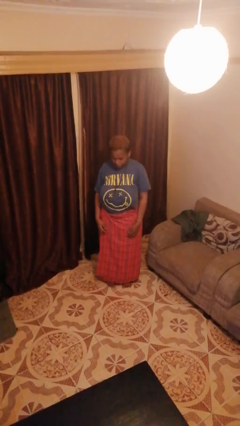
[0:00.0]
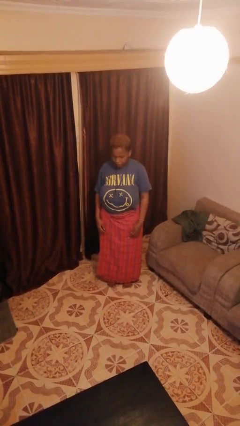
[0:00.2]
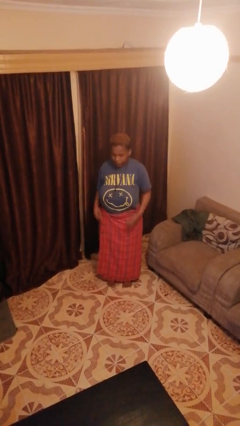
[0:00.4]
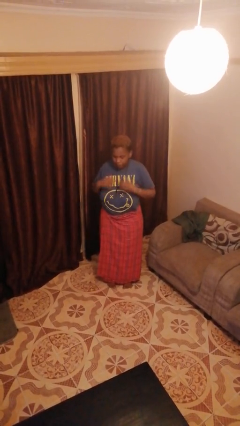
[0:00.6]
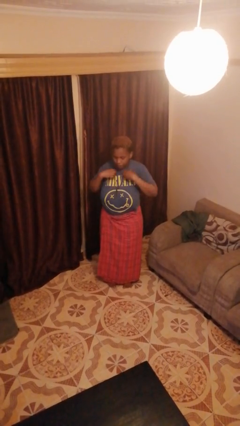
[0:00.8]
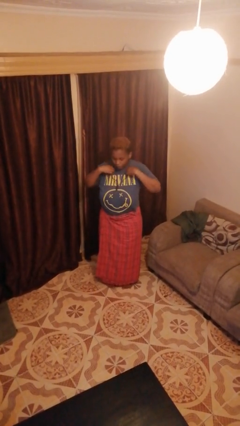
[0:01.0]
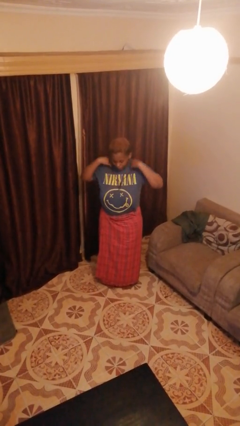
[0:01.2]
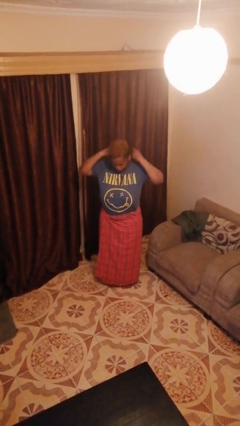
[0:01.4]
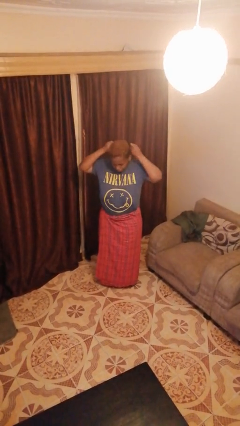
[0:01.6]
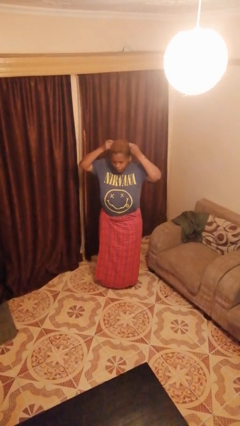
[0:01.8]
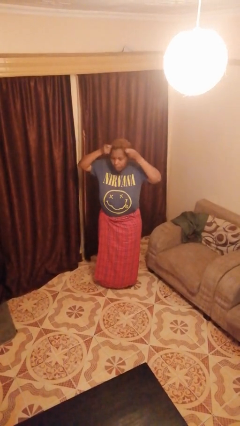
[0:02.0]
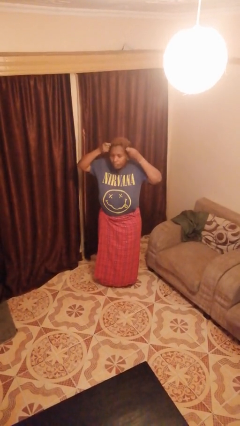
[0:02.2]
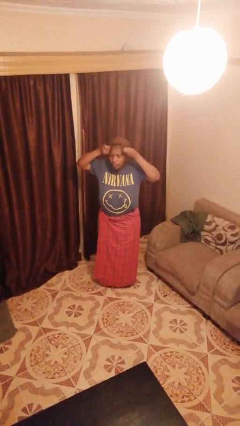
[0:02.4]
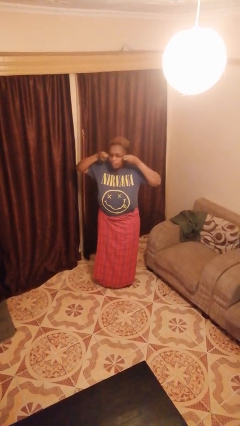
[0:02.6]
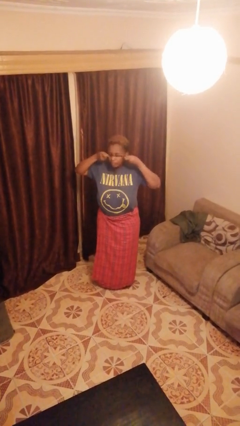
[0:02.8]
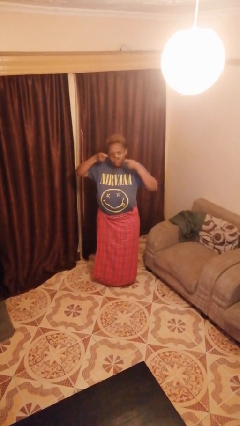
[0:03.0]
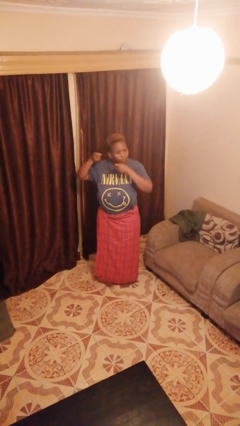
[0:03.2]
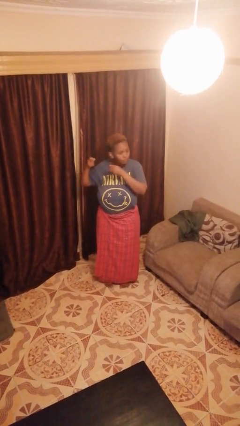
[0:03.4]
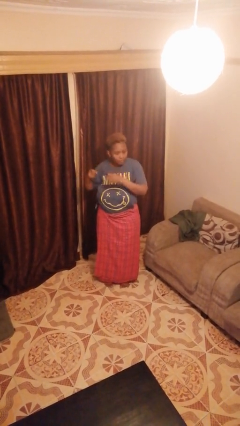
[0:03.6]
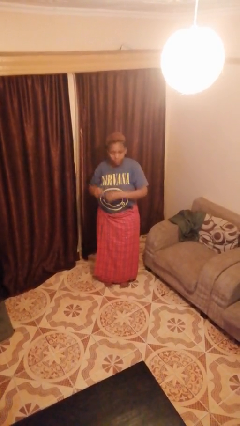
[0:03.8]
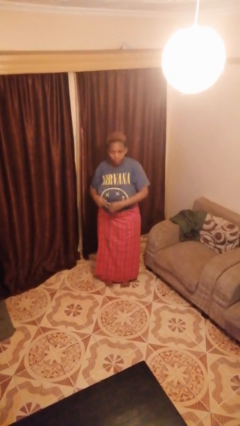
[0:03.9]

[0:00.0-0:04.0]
person takes off necklace

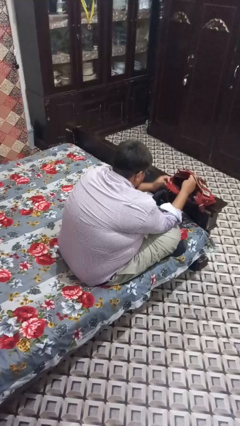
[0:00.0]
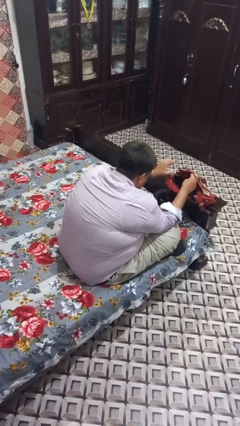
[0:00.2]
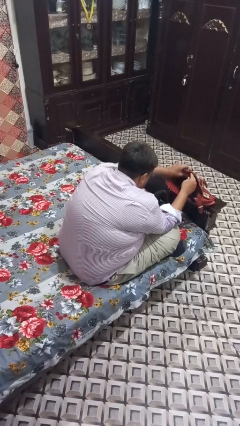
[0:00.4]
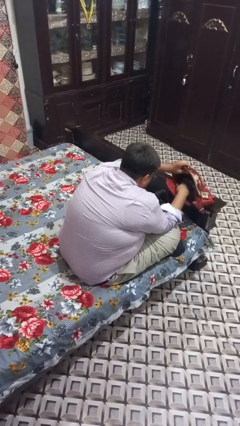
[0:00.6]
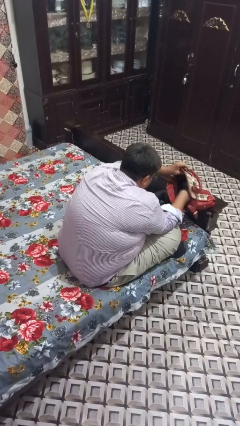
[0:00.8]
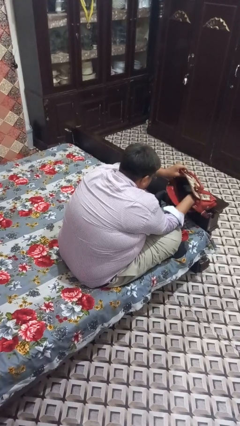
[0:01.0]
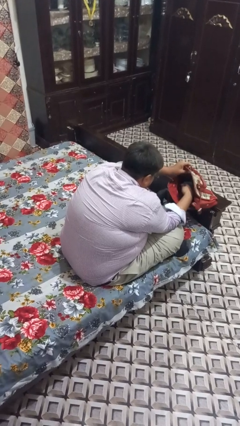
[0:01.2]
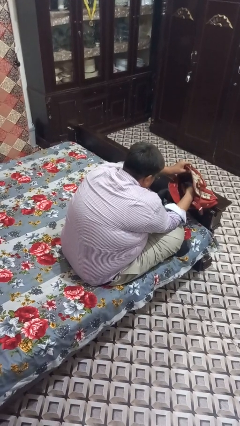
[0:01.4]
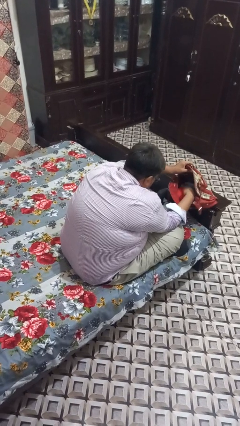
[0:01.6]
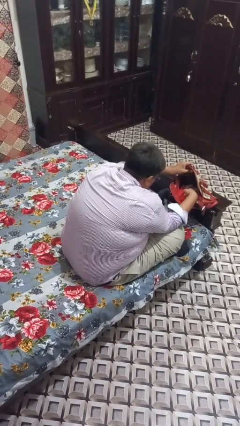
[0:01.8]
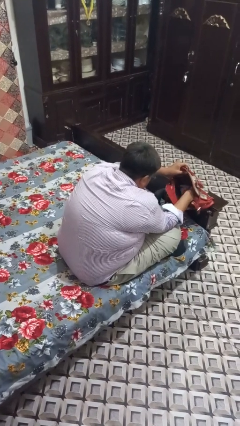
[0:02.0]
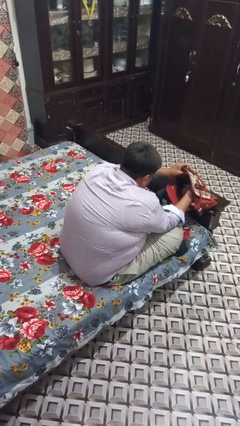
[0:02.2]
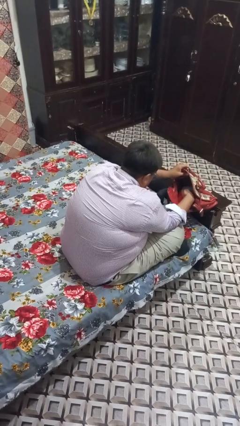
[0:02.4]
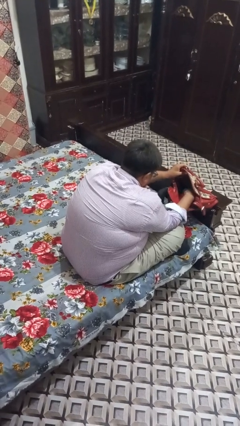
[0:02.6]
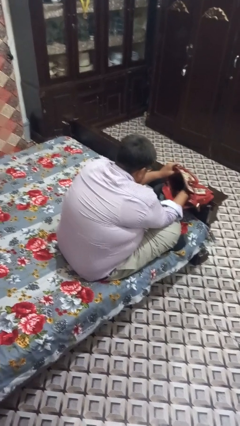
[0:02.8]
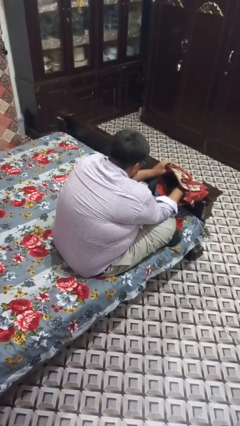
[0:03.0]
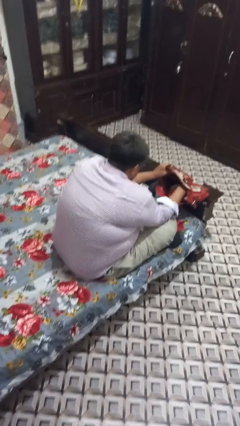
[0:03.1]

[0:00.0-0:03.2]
person searches in purse

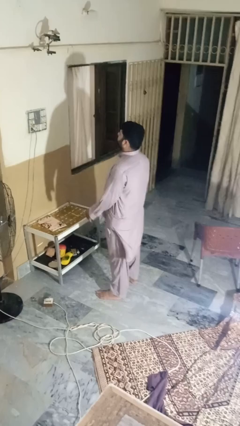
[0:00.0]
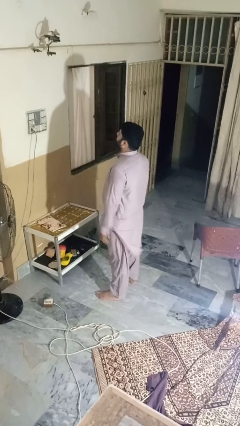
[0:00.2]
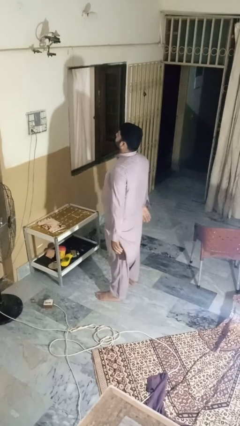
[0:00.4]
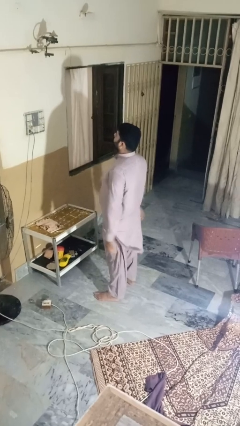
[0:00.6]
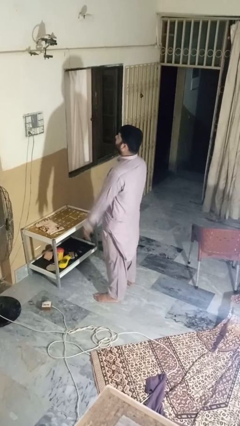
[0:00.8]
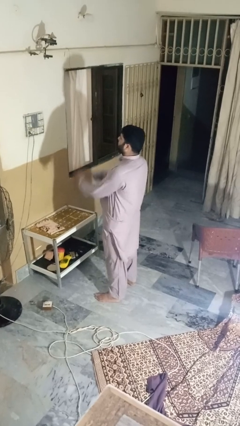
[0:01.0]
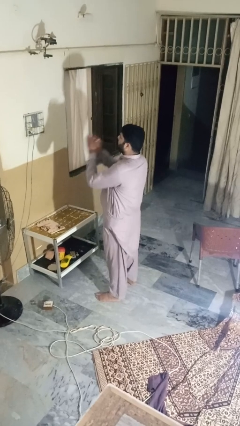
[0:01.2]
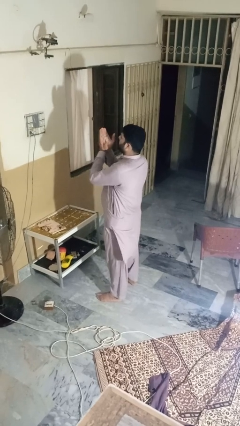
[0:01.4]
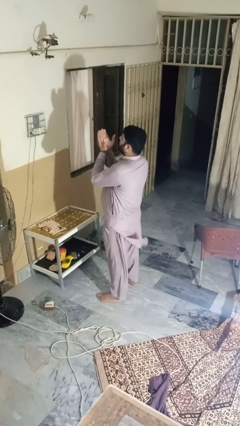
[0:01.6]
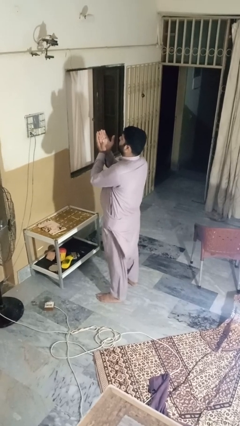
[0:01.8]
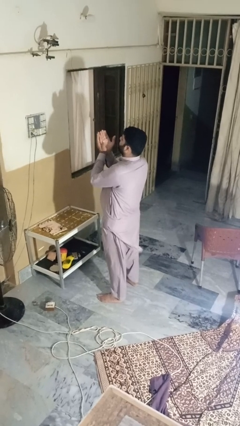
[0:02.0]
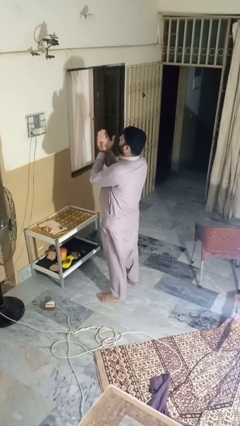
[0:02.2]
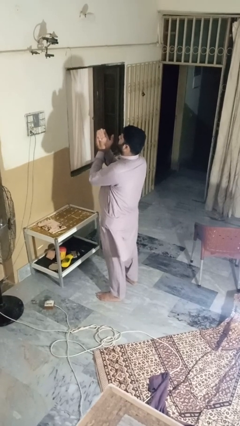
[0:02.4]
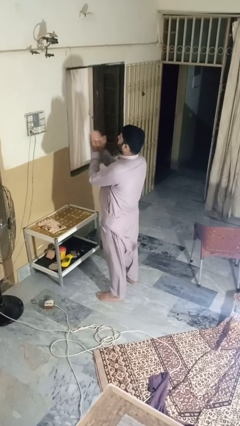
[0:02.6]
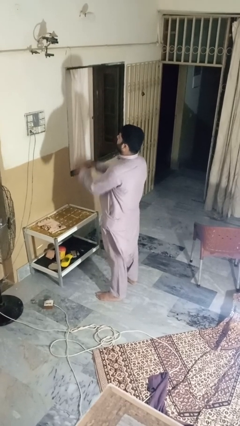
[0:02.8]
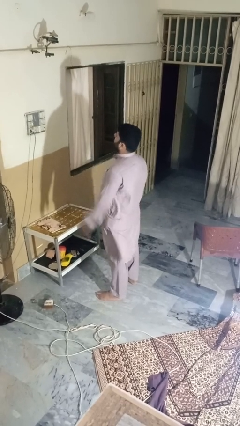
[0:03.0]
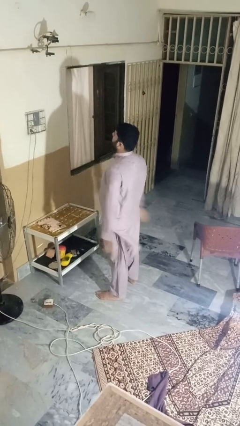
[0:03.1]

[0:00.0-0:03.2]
person prays

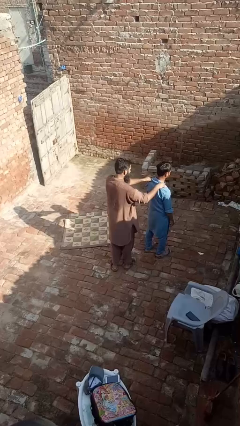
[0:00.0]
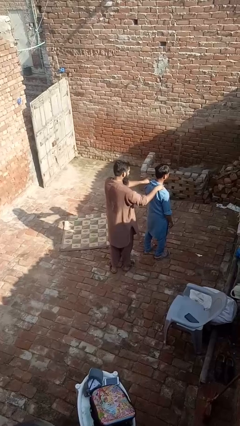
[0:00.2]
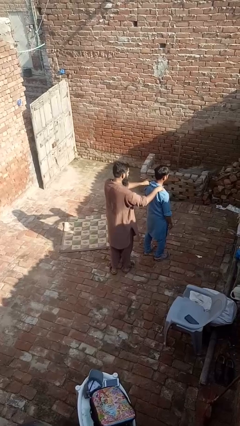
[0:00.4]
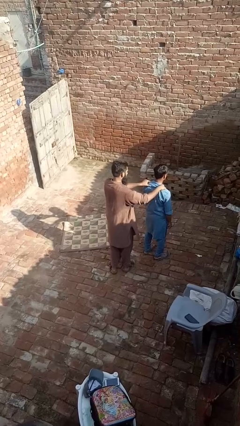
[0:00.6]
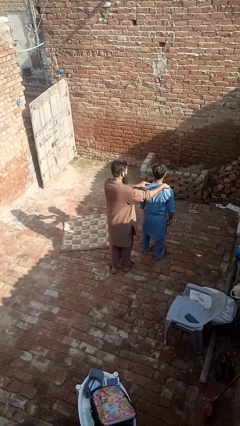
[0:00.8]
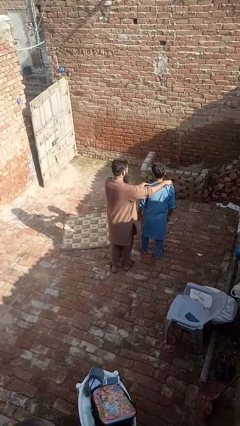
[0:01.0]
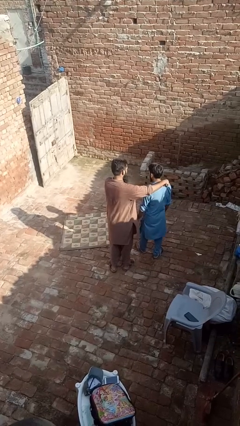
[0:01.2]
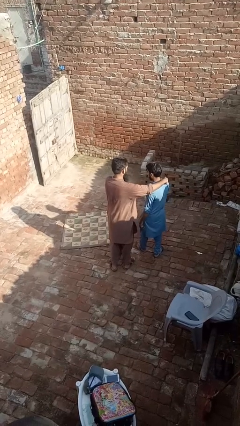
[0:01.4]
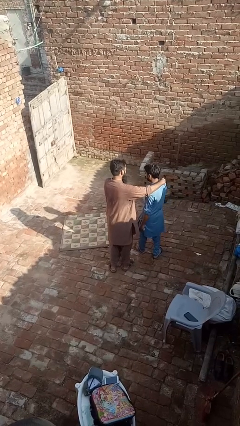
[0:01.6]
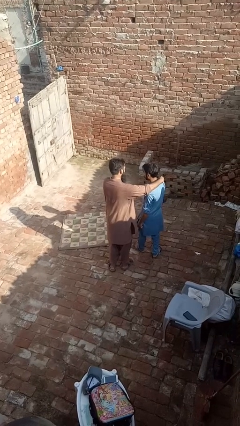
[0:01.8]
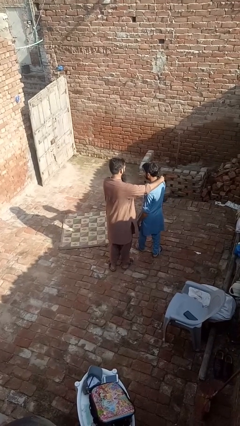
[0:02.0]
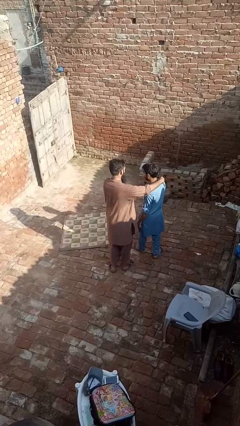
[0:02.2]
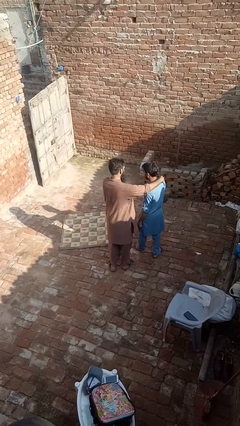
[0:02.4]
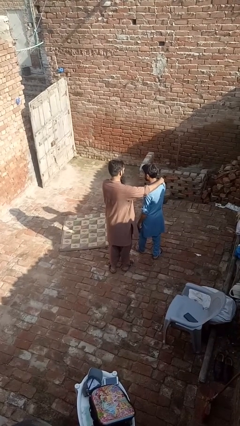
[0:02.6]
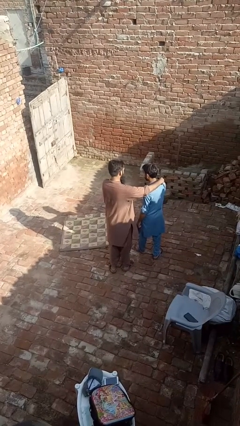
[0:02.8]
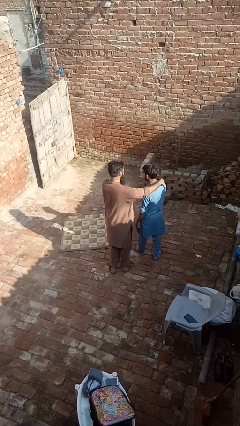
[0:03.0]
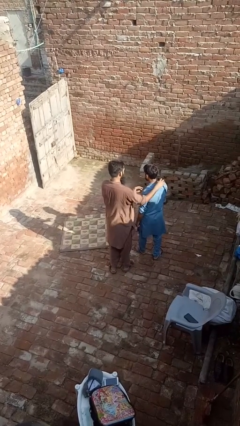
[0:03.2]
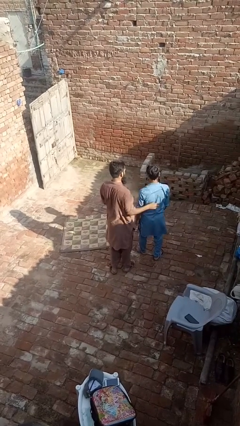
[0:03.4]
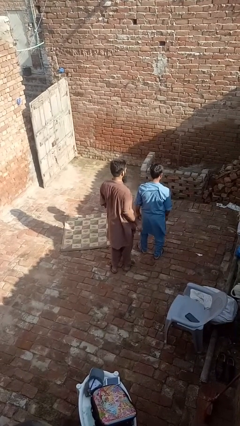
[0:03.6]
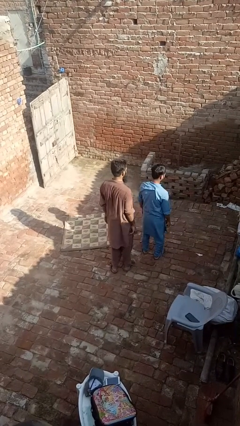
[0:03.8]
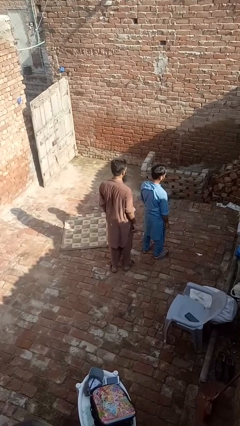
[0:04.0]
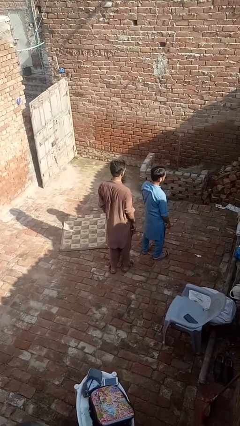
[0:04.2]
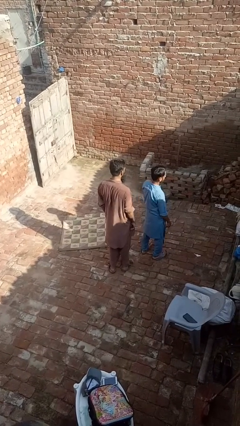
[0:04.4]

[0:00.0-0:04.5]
person spins person around

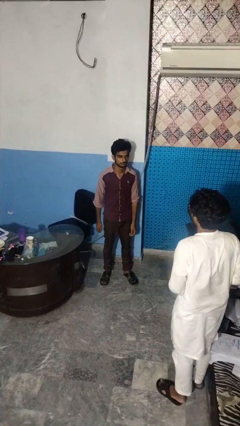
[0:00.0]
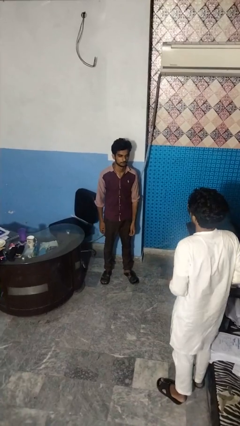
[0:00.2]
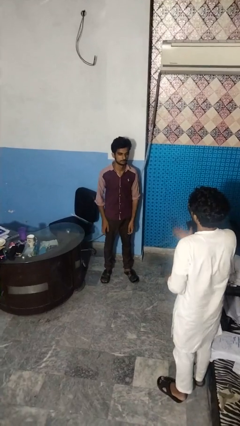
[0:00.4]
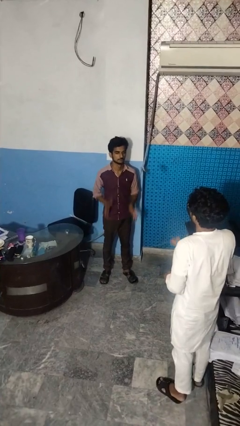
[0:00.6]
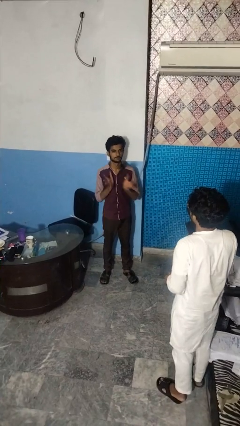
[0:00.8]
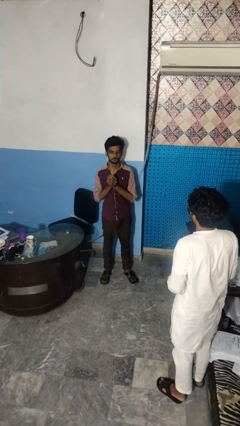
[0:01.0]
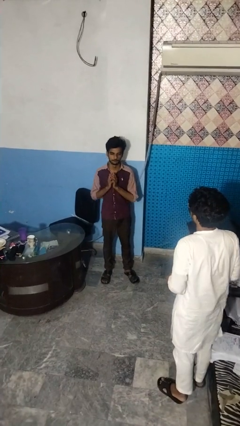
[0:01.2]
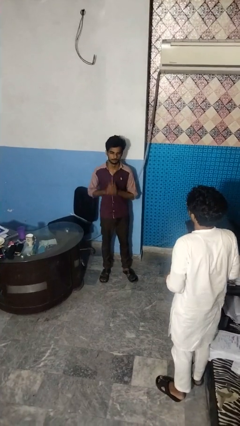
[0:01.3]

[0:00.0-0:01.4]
person catches object from person

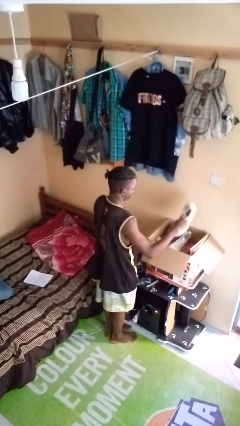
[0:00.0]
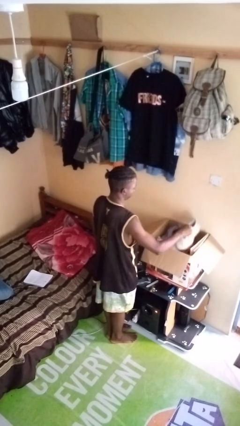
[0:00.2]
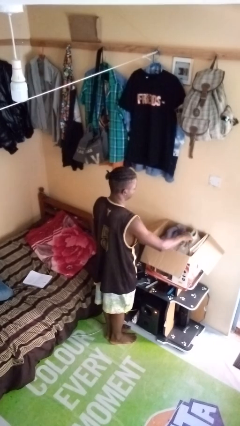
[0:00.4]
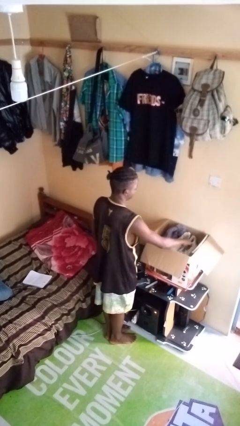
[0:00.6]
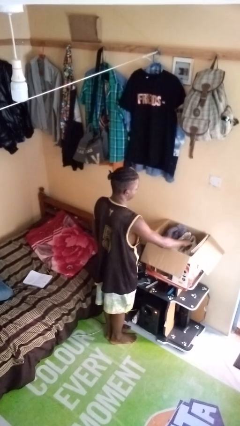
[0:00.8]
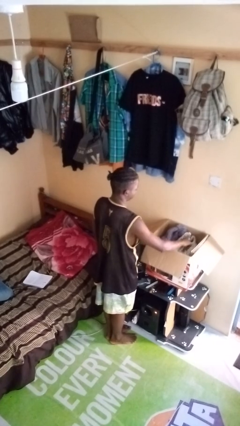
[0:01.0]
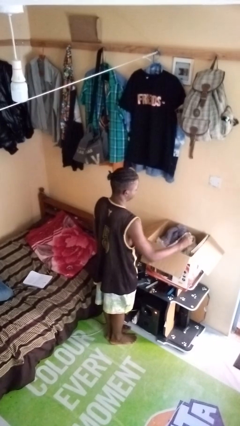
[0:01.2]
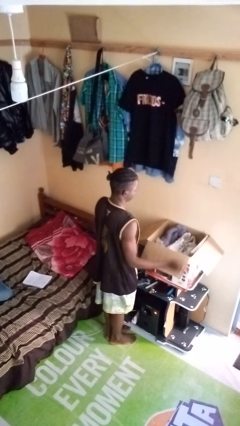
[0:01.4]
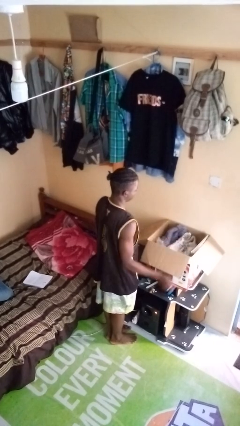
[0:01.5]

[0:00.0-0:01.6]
person puts object into box
